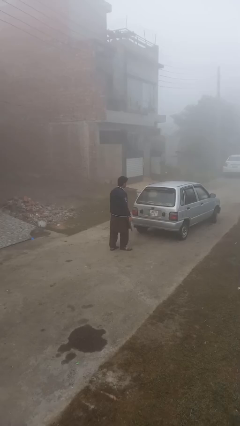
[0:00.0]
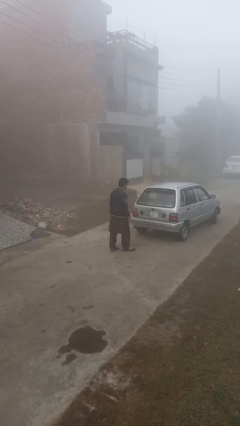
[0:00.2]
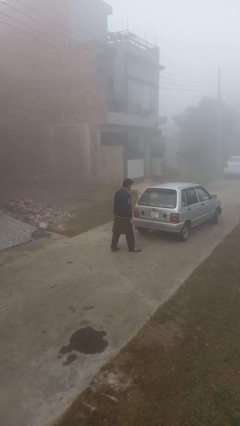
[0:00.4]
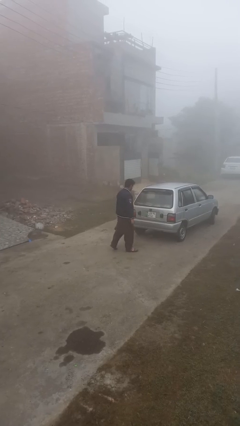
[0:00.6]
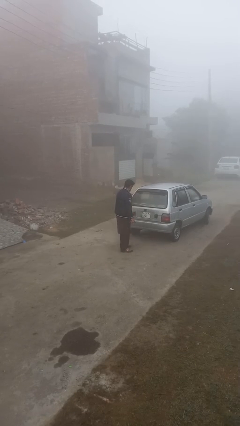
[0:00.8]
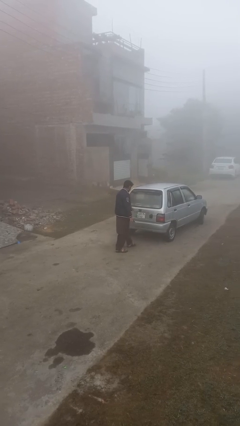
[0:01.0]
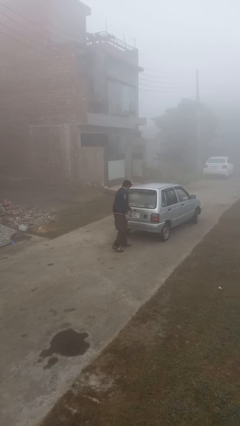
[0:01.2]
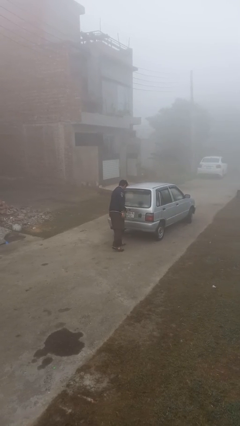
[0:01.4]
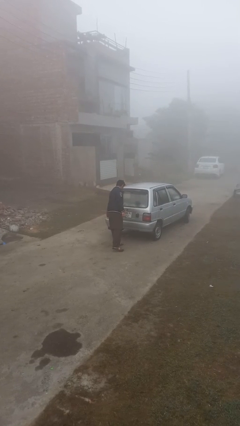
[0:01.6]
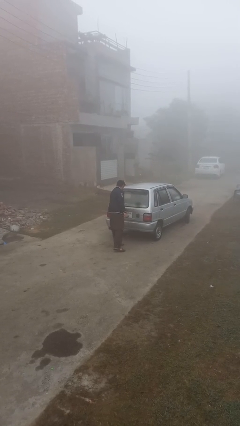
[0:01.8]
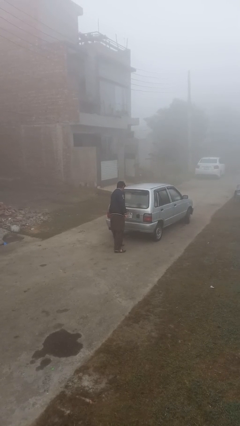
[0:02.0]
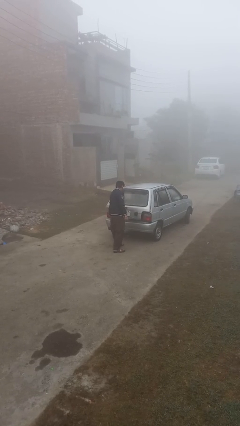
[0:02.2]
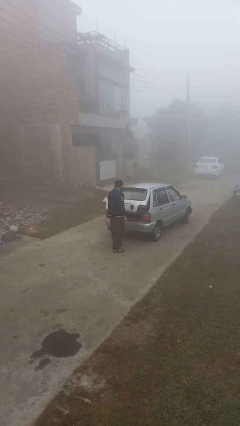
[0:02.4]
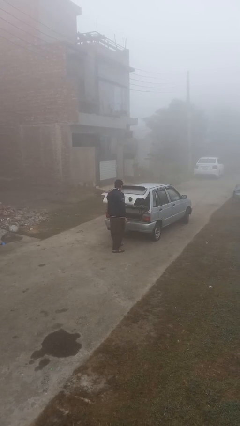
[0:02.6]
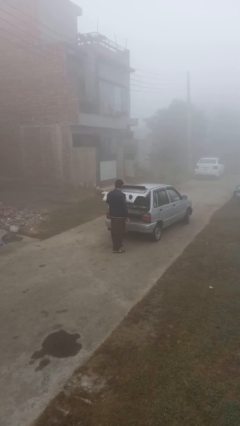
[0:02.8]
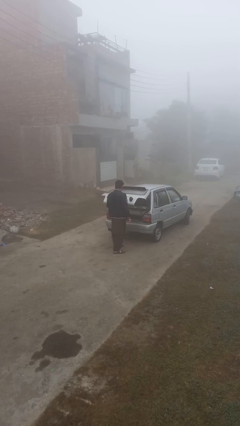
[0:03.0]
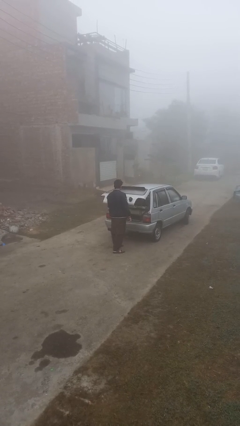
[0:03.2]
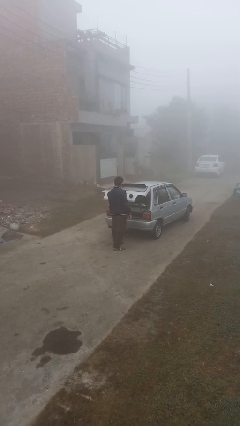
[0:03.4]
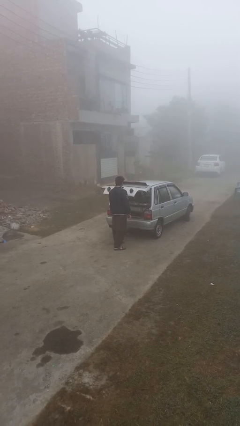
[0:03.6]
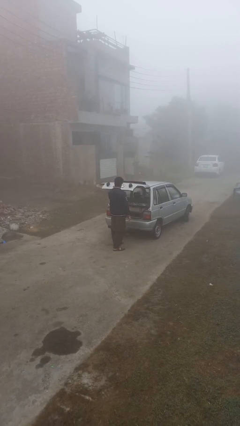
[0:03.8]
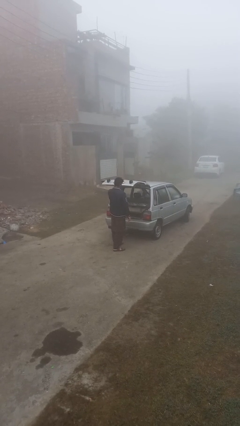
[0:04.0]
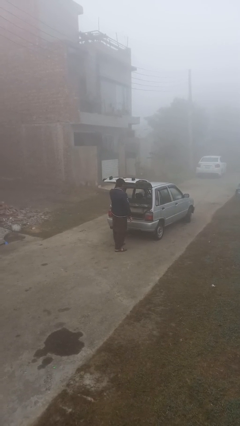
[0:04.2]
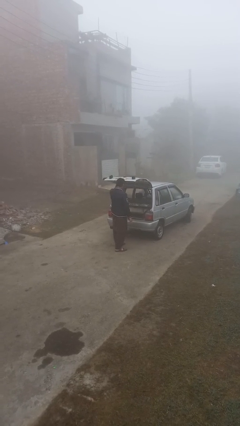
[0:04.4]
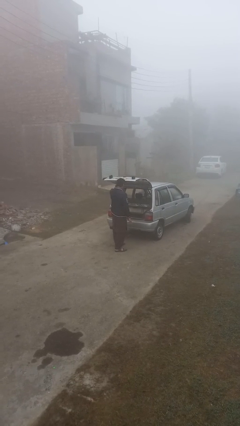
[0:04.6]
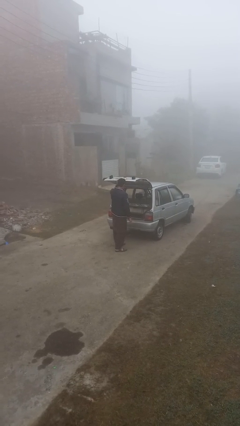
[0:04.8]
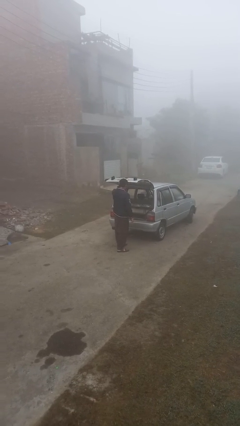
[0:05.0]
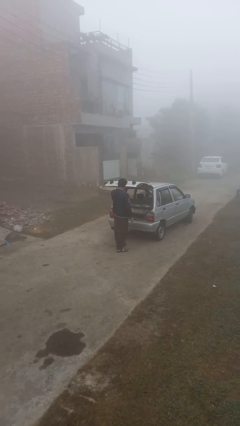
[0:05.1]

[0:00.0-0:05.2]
person opens car trunk

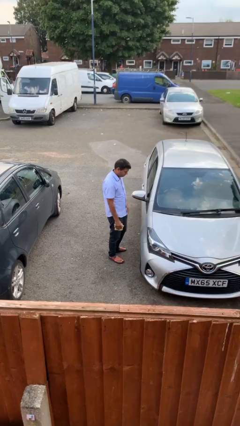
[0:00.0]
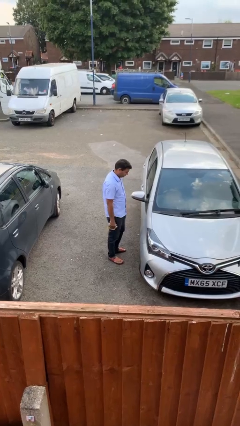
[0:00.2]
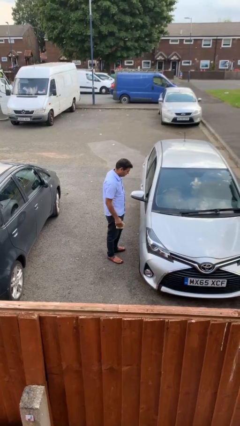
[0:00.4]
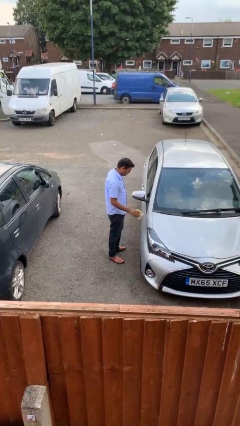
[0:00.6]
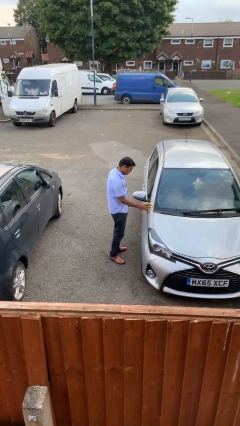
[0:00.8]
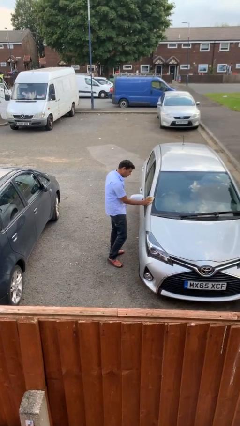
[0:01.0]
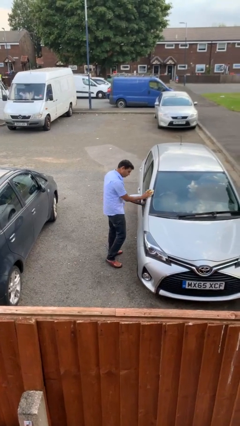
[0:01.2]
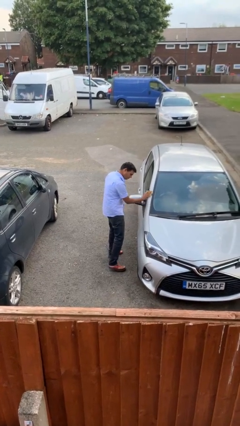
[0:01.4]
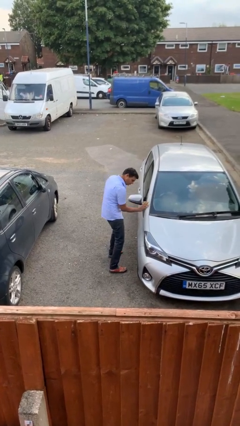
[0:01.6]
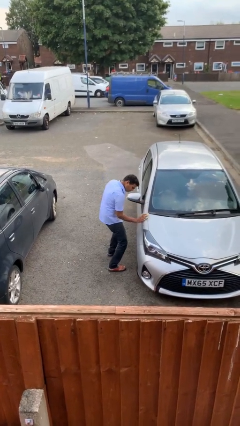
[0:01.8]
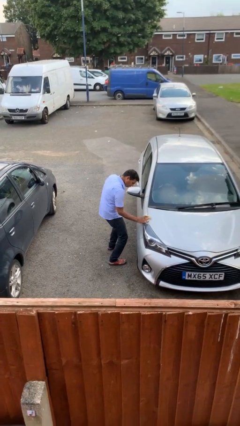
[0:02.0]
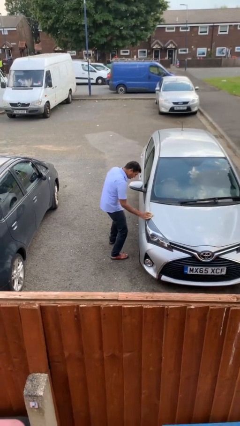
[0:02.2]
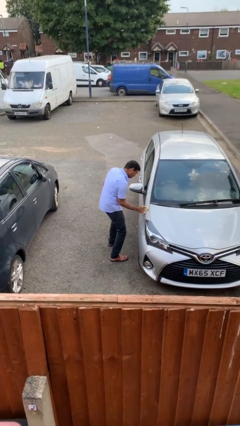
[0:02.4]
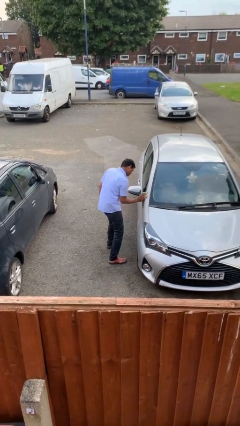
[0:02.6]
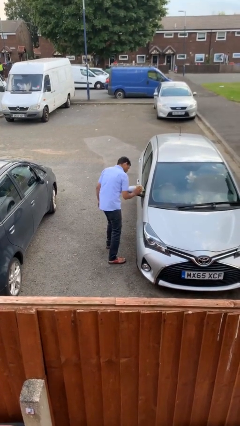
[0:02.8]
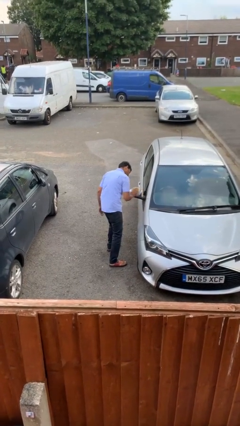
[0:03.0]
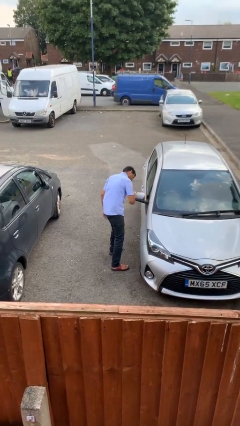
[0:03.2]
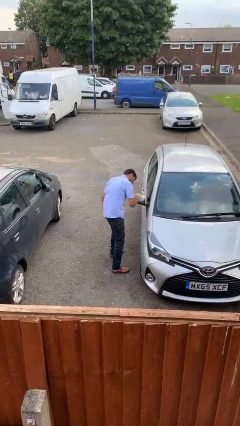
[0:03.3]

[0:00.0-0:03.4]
person polishes car with rag

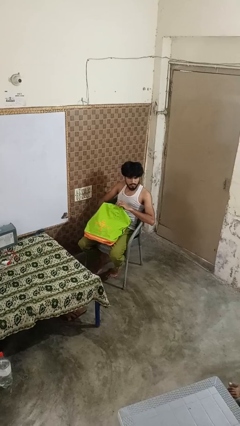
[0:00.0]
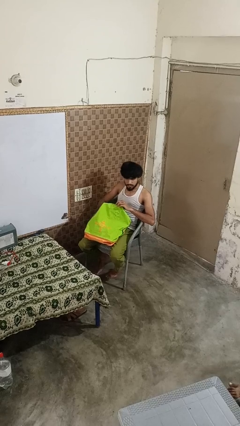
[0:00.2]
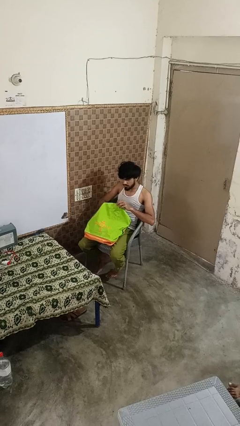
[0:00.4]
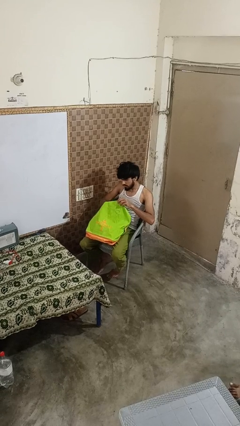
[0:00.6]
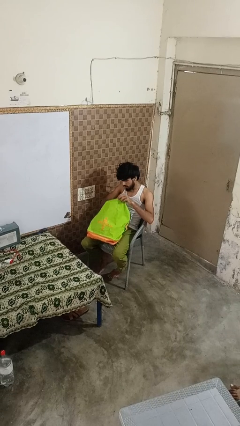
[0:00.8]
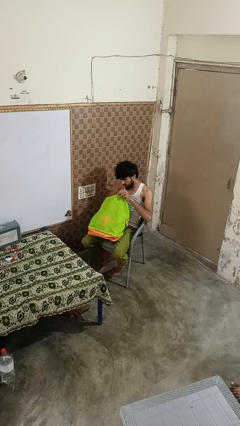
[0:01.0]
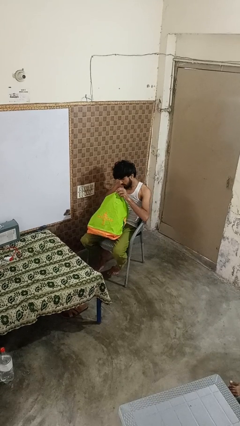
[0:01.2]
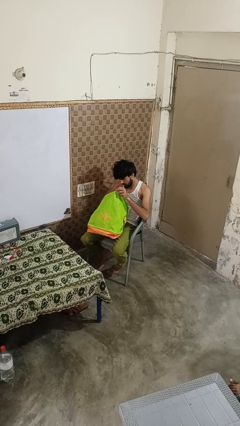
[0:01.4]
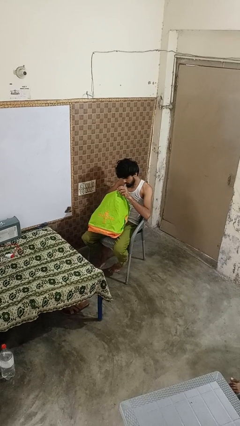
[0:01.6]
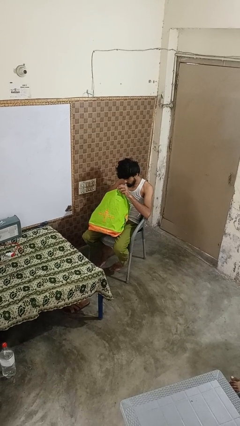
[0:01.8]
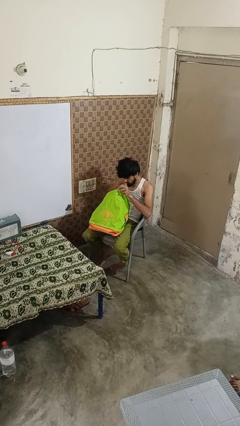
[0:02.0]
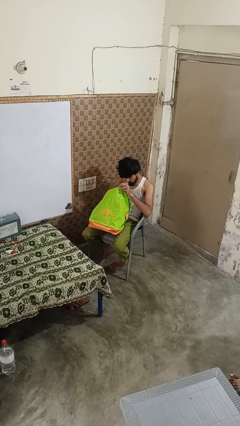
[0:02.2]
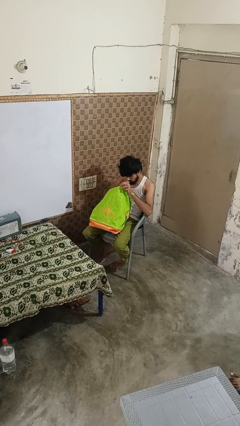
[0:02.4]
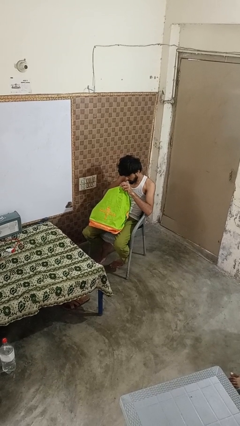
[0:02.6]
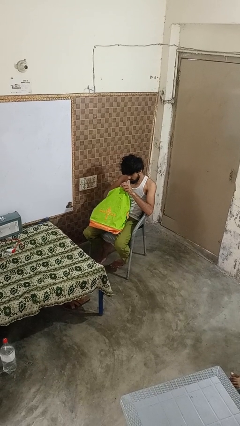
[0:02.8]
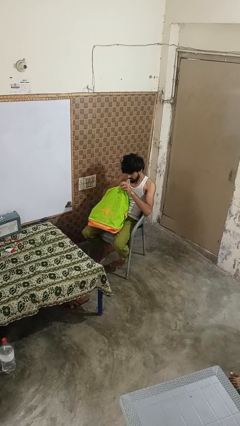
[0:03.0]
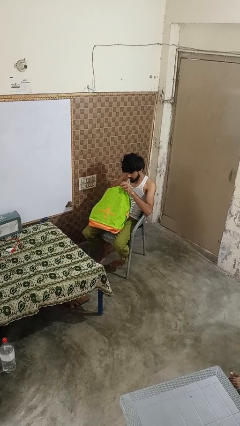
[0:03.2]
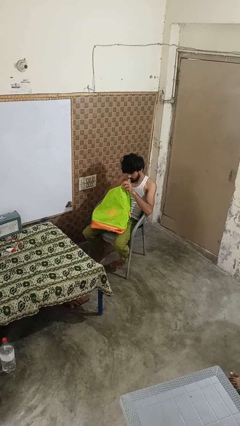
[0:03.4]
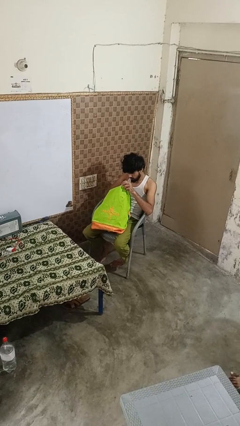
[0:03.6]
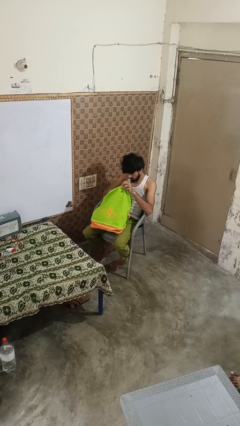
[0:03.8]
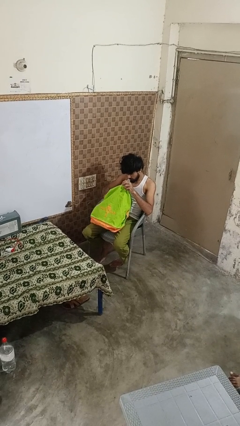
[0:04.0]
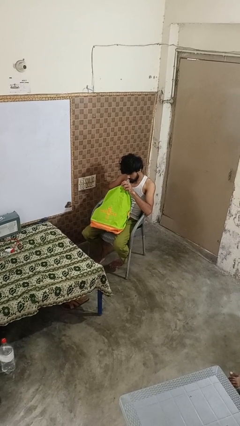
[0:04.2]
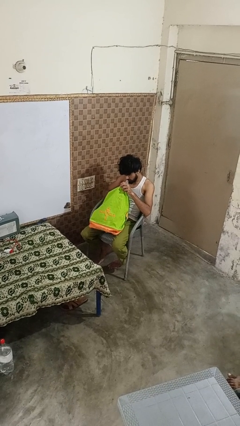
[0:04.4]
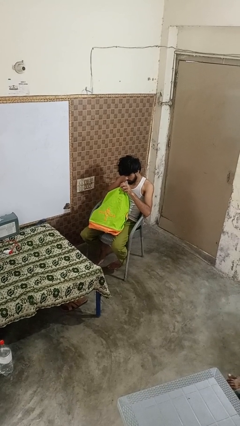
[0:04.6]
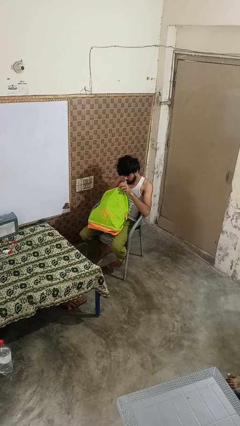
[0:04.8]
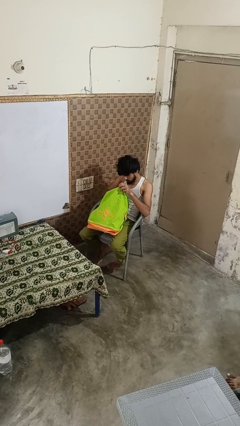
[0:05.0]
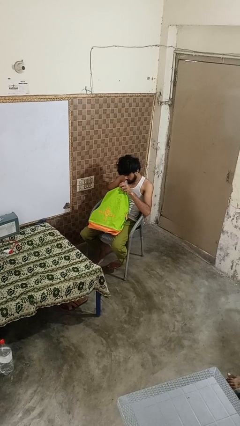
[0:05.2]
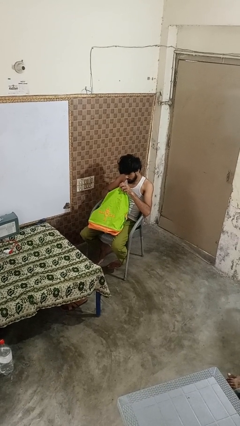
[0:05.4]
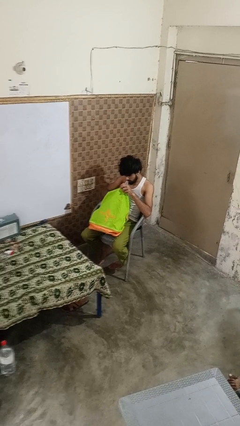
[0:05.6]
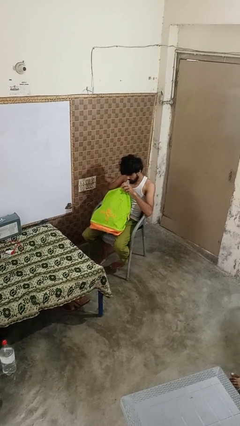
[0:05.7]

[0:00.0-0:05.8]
person searches in bag

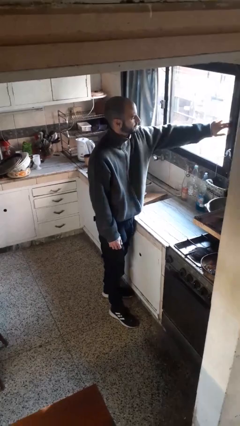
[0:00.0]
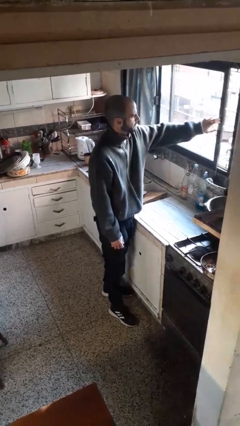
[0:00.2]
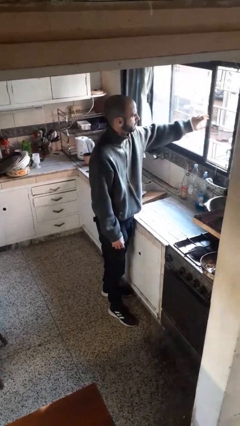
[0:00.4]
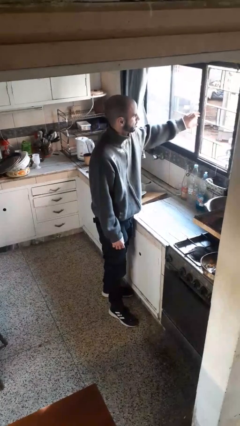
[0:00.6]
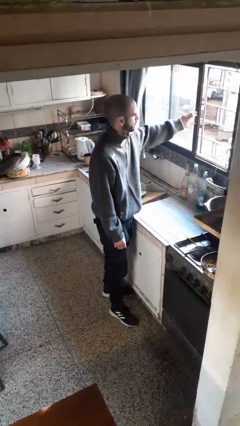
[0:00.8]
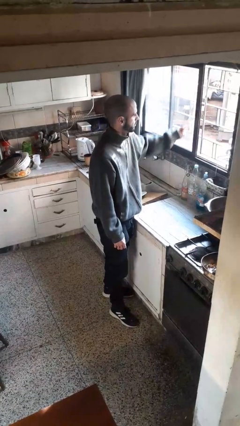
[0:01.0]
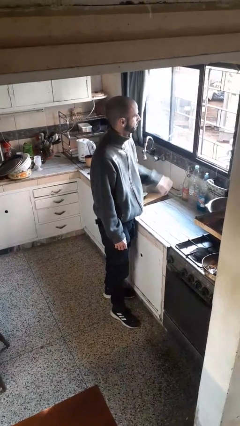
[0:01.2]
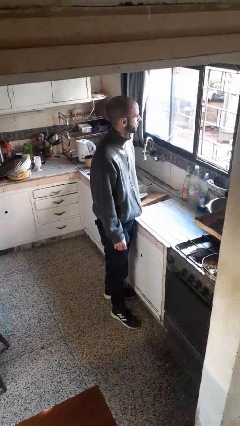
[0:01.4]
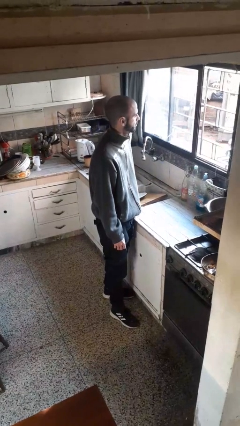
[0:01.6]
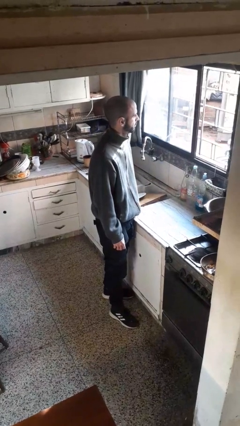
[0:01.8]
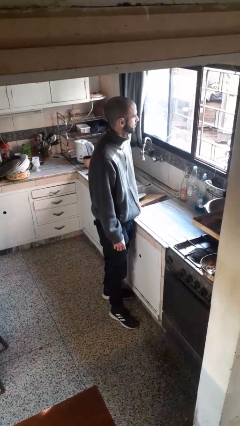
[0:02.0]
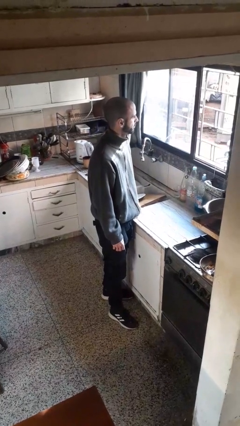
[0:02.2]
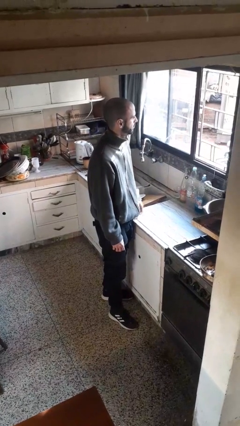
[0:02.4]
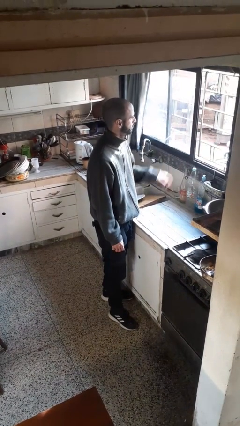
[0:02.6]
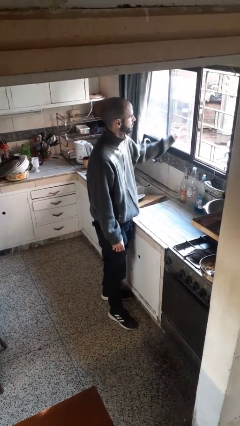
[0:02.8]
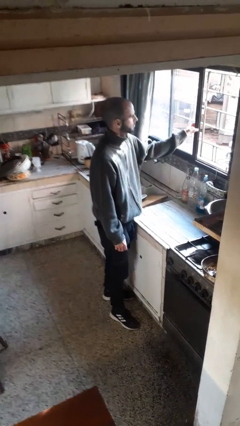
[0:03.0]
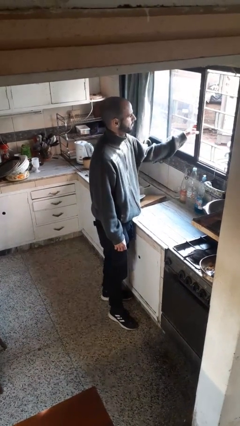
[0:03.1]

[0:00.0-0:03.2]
person opens home window

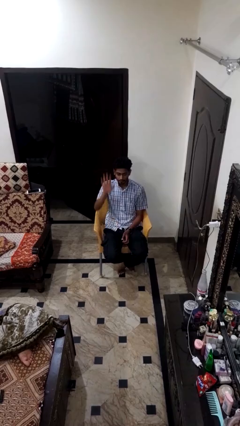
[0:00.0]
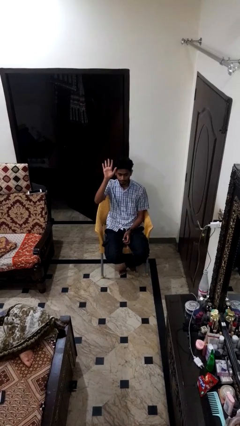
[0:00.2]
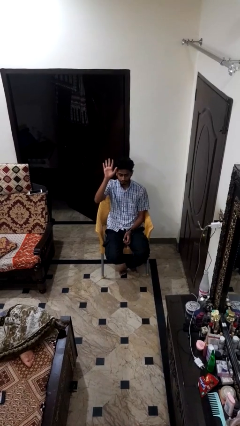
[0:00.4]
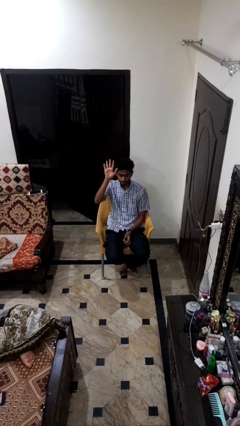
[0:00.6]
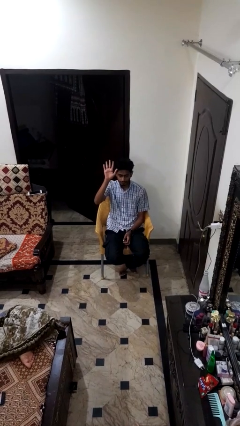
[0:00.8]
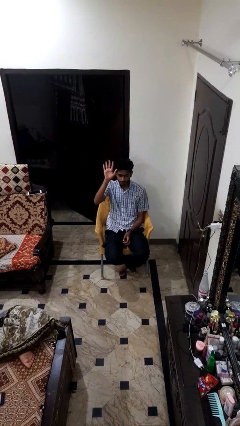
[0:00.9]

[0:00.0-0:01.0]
person gestures raise hand
